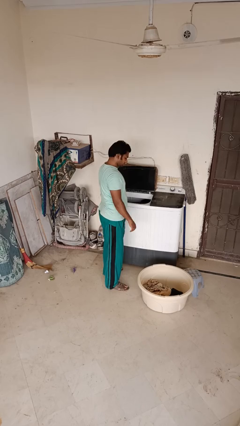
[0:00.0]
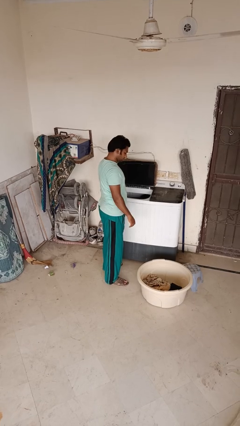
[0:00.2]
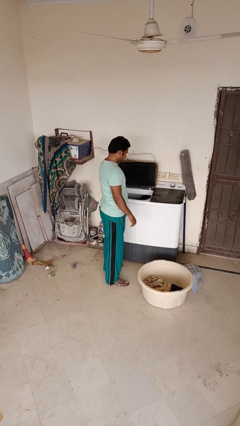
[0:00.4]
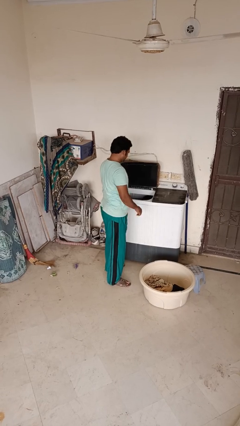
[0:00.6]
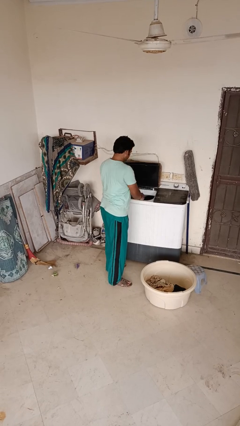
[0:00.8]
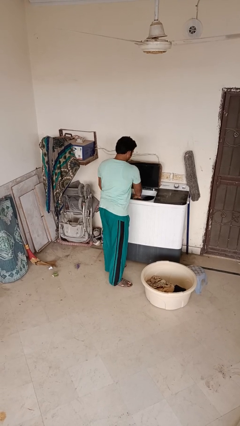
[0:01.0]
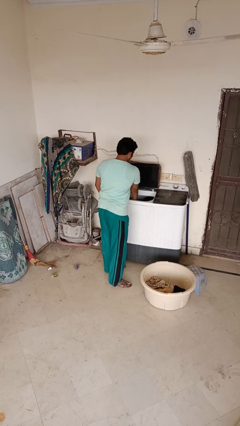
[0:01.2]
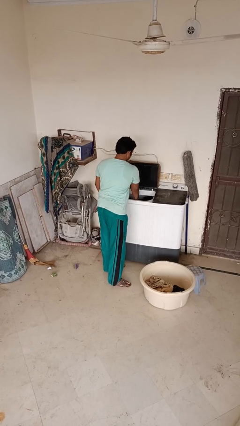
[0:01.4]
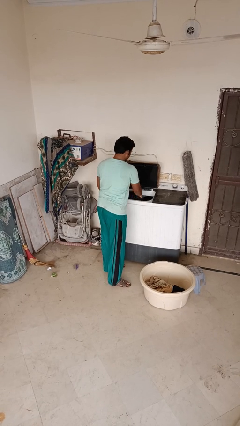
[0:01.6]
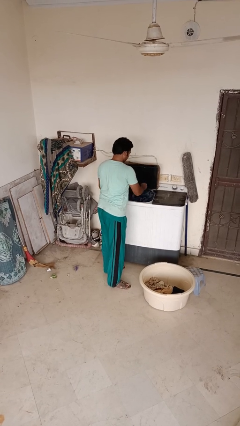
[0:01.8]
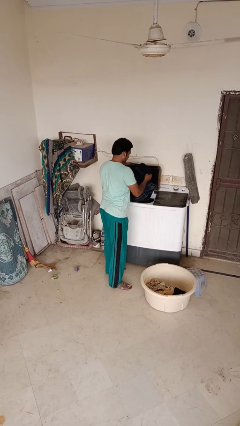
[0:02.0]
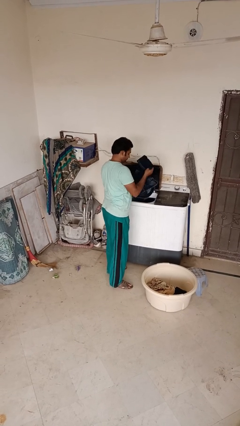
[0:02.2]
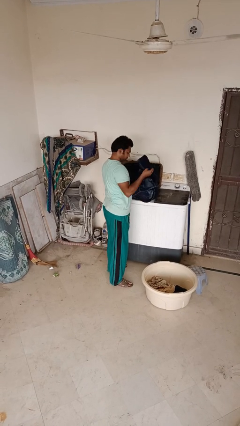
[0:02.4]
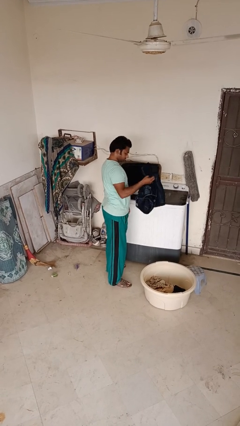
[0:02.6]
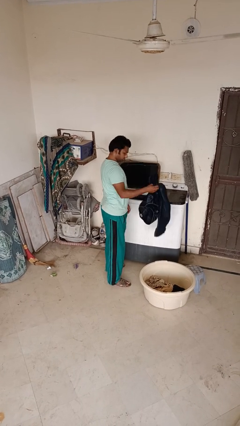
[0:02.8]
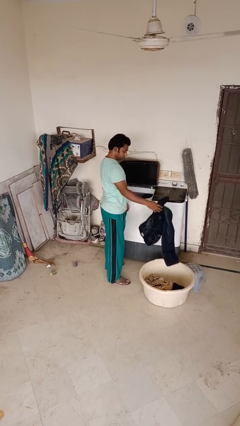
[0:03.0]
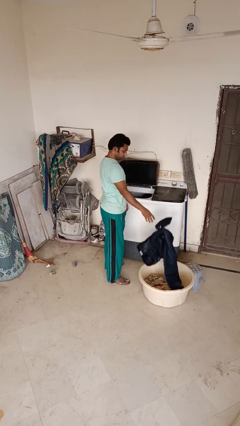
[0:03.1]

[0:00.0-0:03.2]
person loads clotheswasher

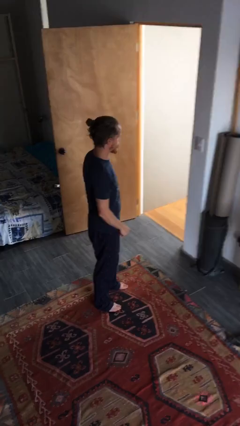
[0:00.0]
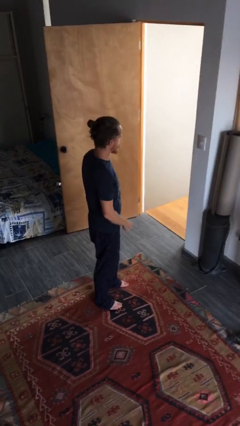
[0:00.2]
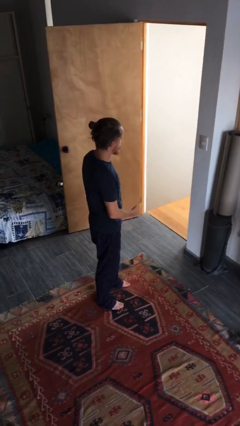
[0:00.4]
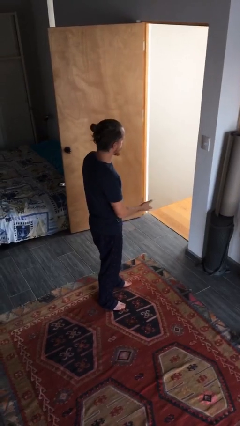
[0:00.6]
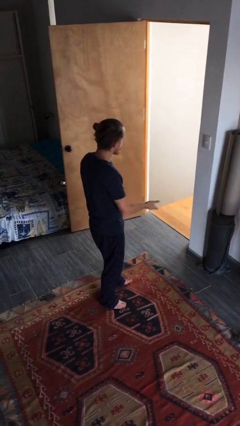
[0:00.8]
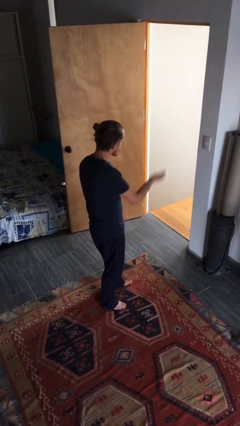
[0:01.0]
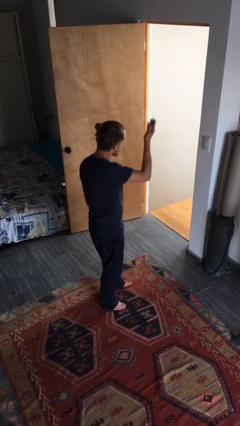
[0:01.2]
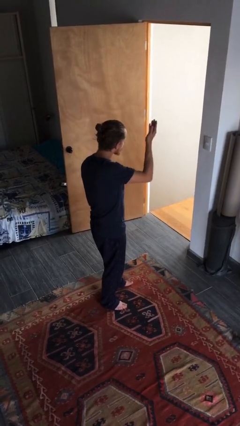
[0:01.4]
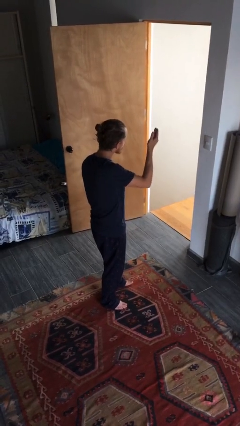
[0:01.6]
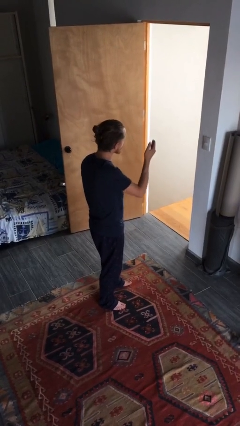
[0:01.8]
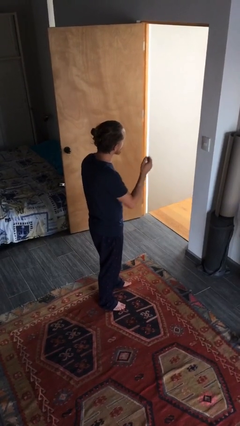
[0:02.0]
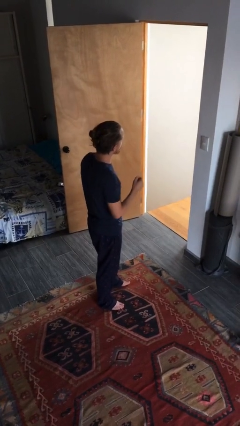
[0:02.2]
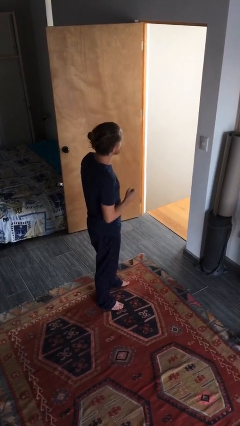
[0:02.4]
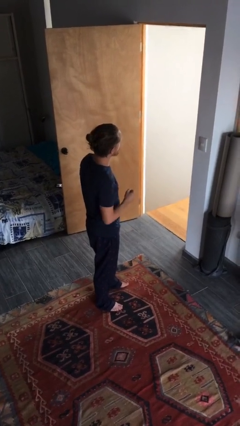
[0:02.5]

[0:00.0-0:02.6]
person gestures swipe up

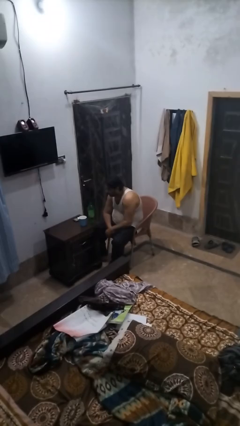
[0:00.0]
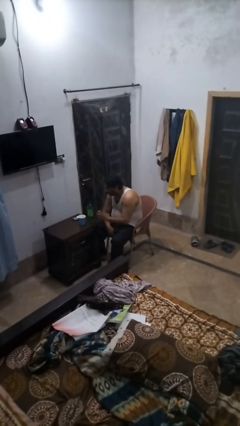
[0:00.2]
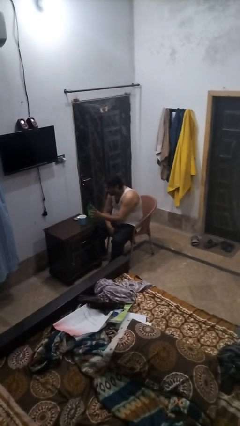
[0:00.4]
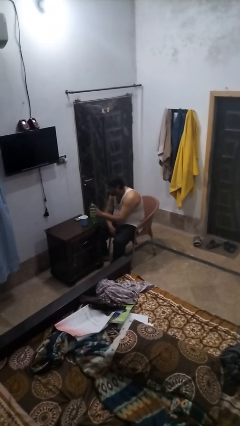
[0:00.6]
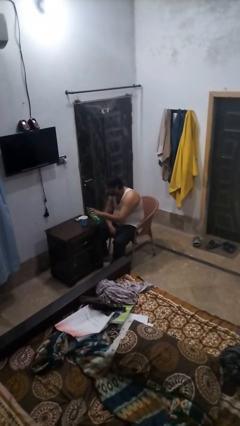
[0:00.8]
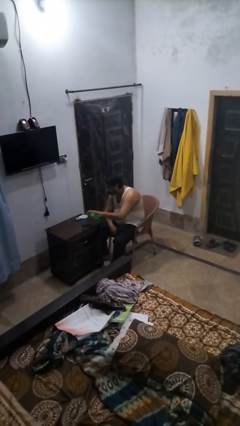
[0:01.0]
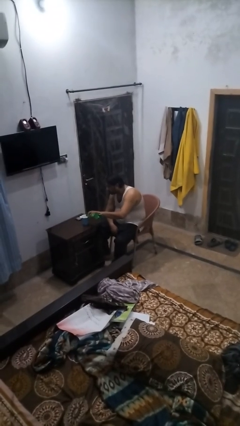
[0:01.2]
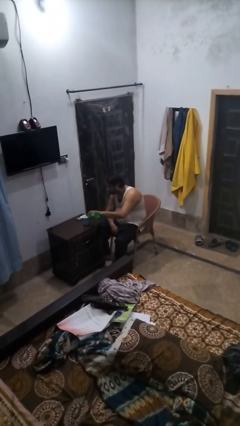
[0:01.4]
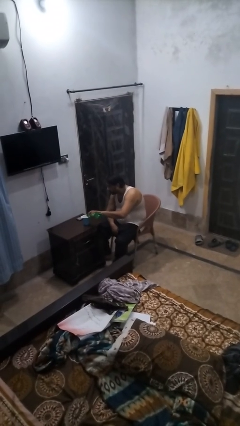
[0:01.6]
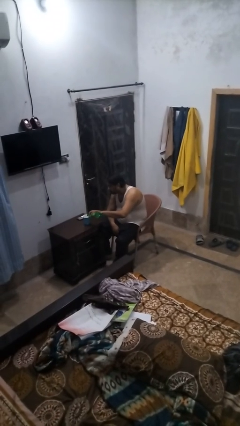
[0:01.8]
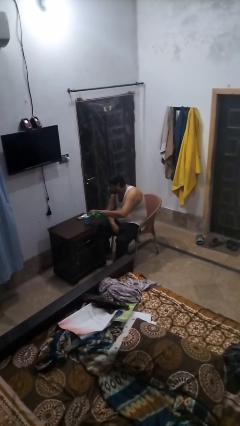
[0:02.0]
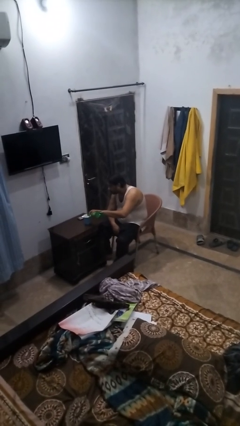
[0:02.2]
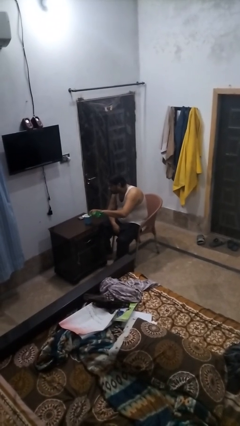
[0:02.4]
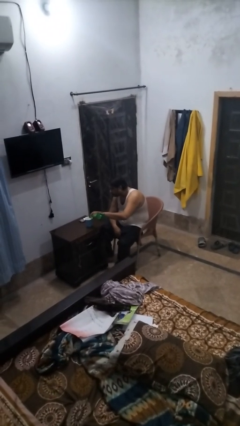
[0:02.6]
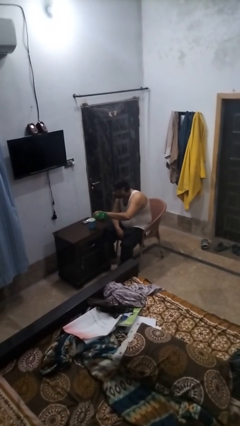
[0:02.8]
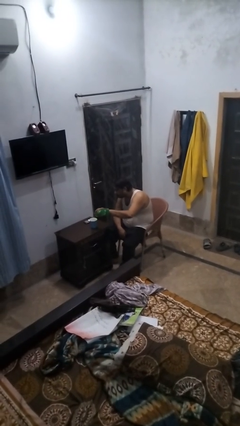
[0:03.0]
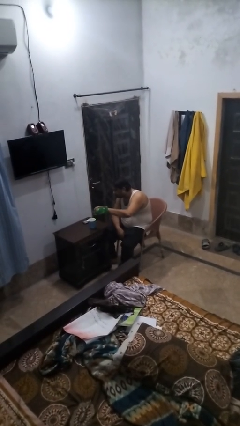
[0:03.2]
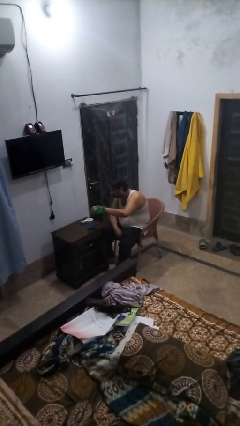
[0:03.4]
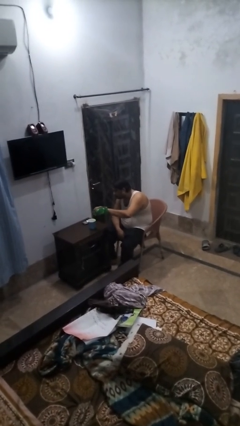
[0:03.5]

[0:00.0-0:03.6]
person pours liquid into cup

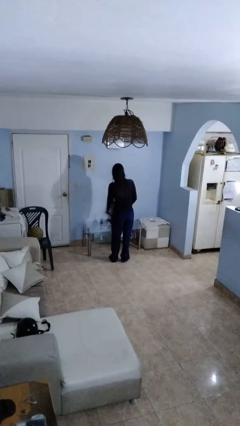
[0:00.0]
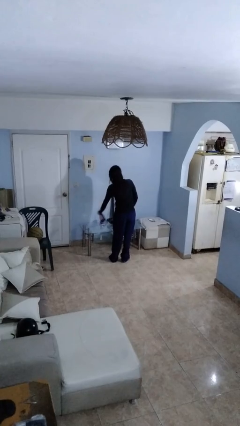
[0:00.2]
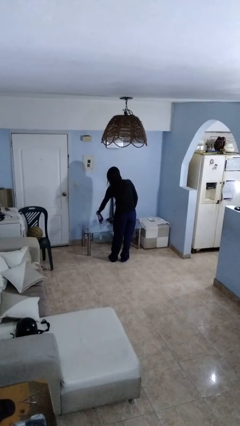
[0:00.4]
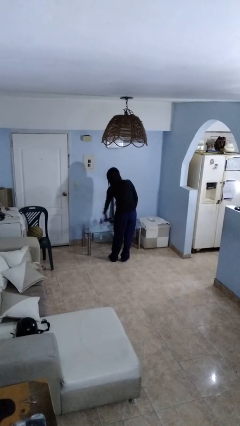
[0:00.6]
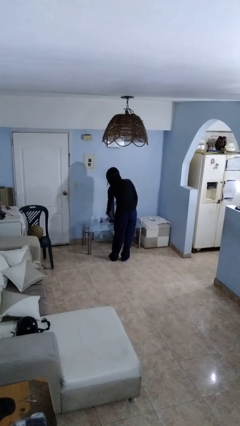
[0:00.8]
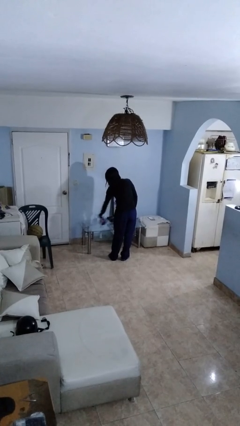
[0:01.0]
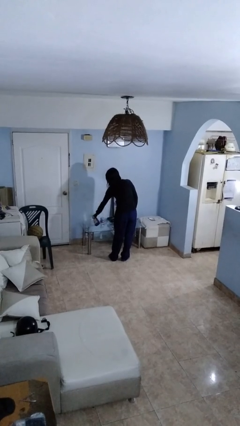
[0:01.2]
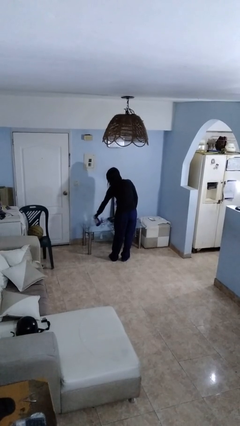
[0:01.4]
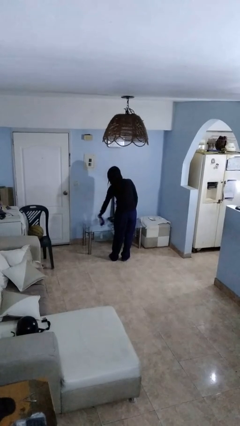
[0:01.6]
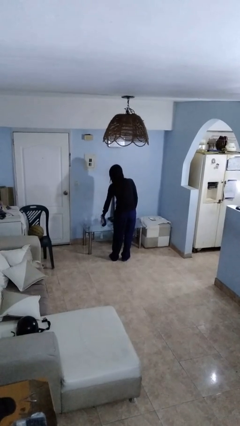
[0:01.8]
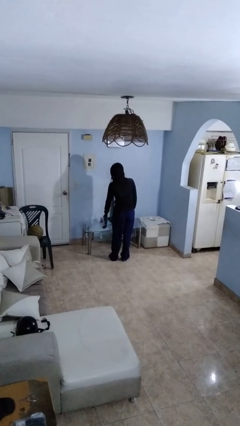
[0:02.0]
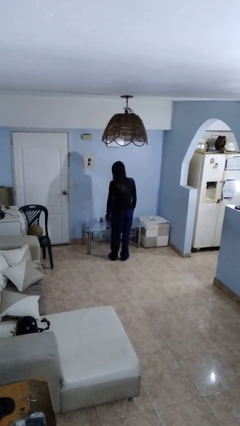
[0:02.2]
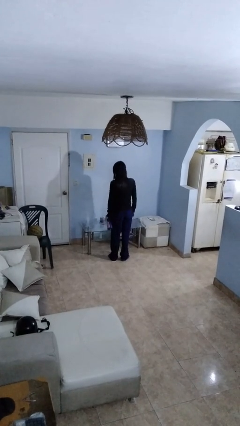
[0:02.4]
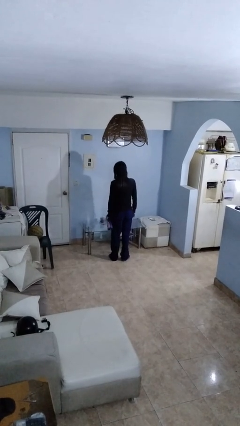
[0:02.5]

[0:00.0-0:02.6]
person sprays from bottle

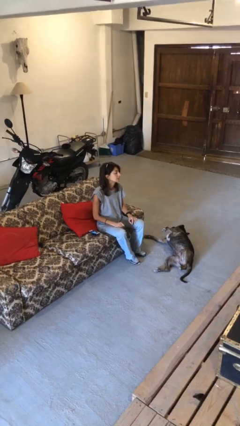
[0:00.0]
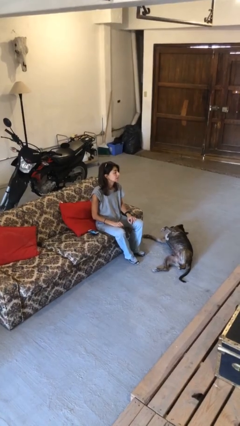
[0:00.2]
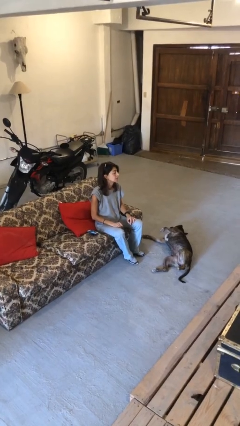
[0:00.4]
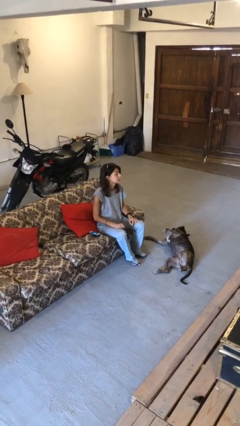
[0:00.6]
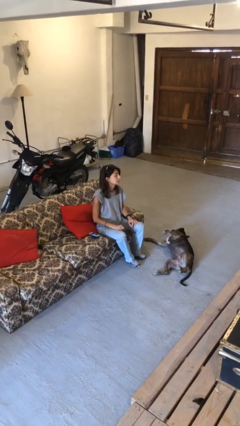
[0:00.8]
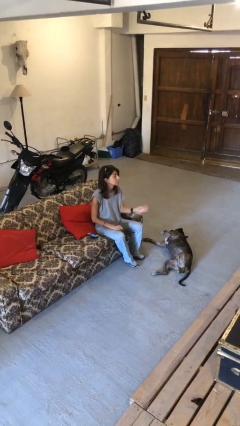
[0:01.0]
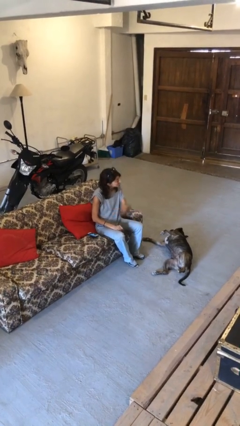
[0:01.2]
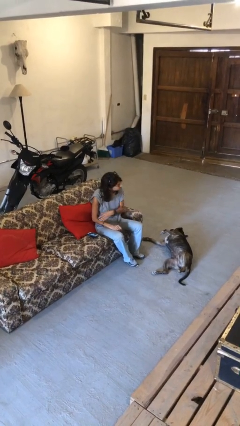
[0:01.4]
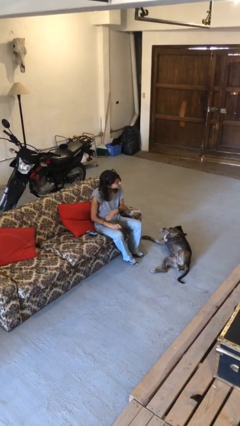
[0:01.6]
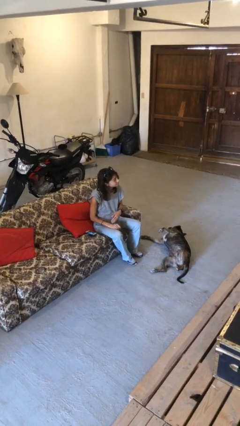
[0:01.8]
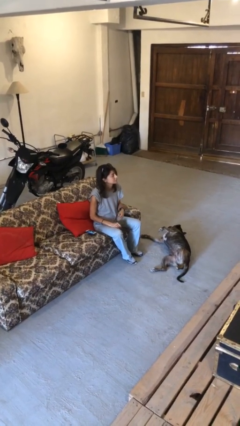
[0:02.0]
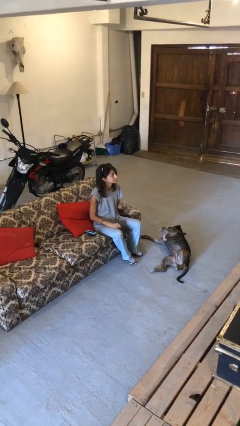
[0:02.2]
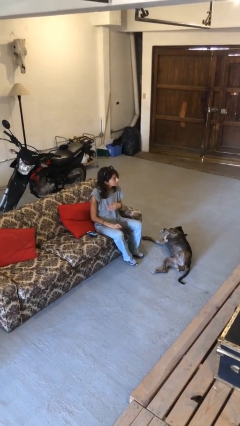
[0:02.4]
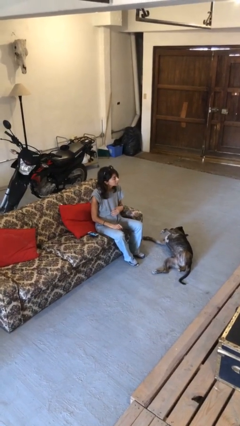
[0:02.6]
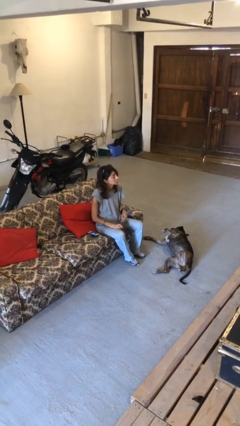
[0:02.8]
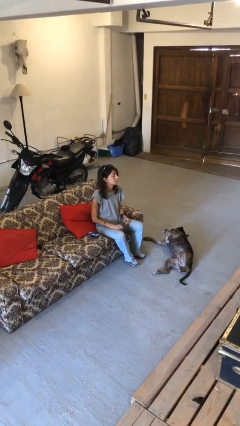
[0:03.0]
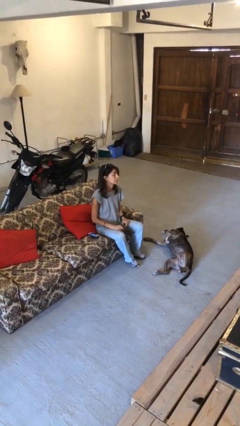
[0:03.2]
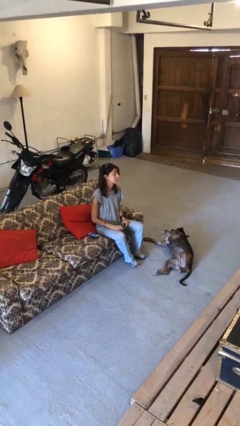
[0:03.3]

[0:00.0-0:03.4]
person gestures come here

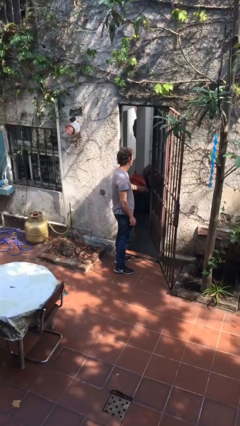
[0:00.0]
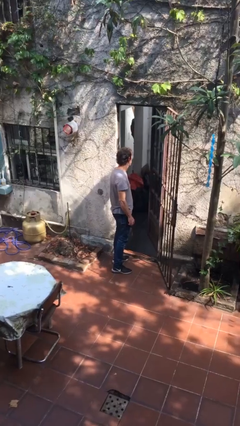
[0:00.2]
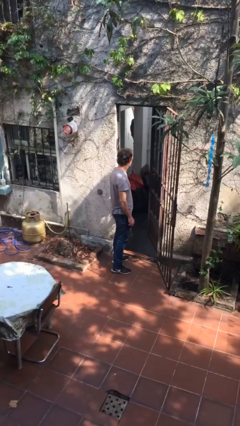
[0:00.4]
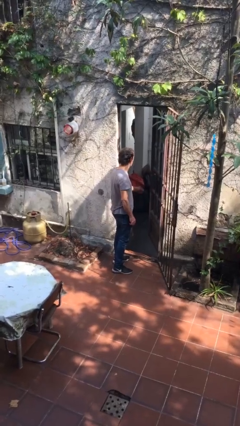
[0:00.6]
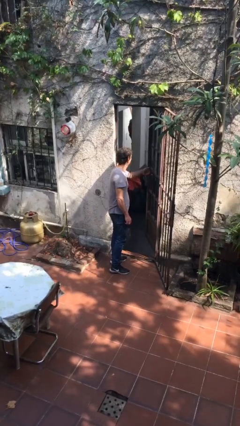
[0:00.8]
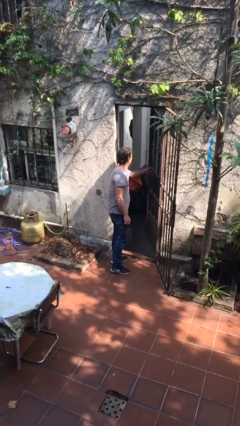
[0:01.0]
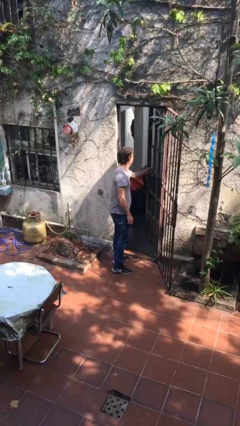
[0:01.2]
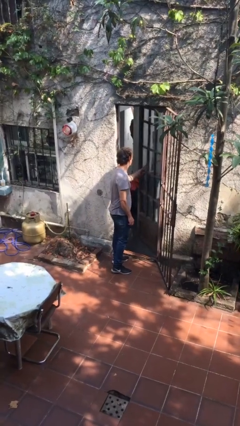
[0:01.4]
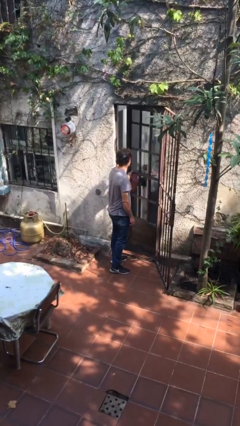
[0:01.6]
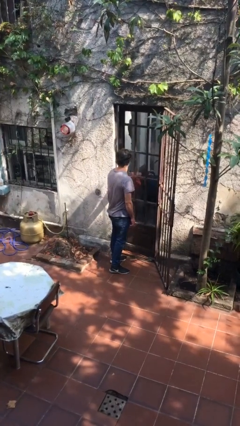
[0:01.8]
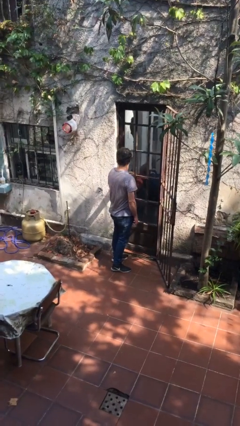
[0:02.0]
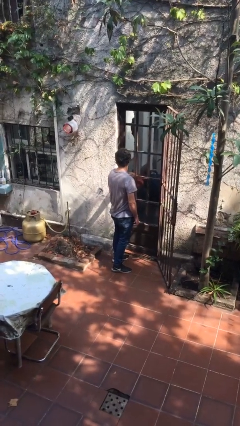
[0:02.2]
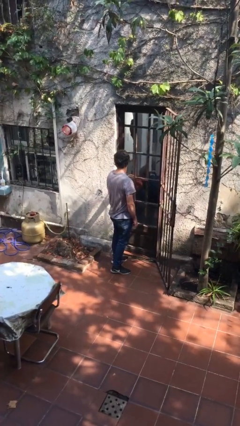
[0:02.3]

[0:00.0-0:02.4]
person closes facility door
